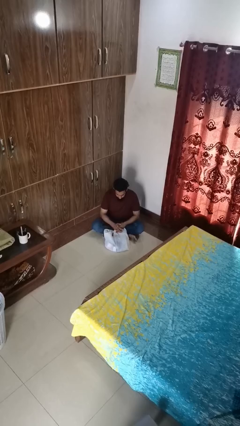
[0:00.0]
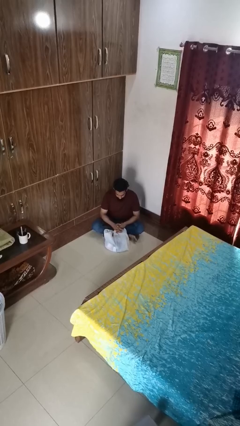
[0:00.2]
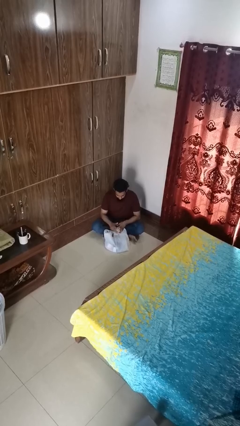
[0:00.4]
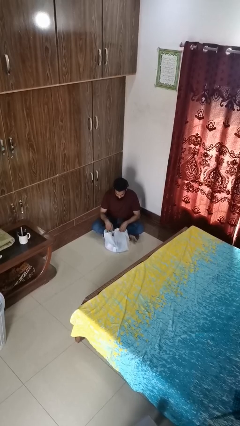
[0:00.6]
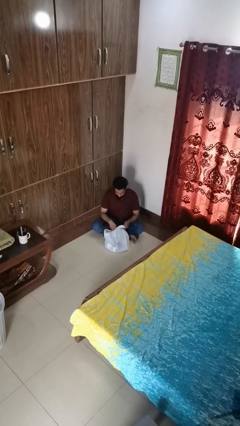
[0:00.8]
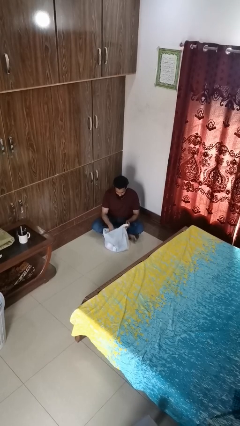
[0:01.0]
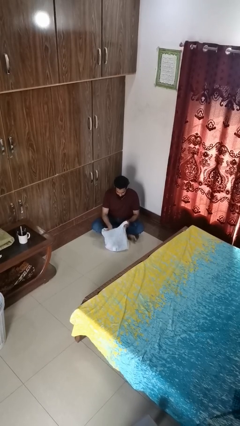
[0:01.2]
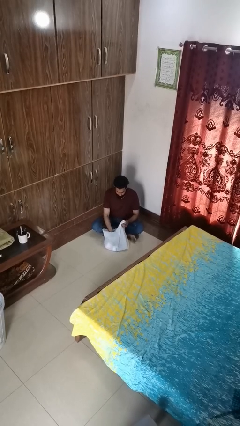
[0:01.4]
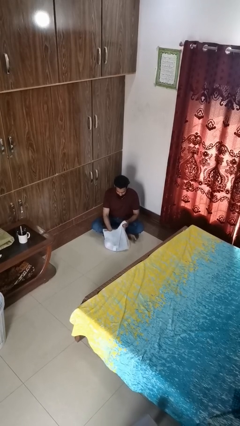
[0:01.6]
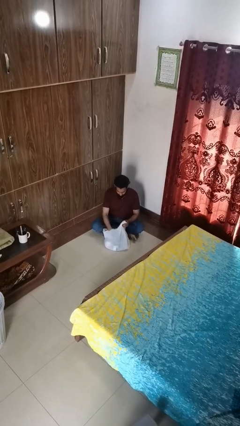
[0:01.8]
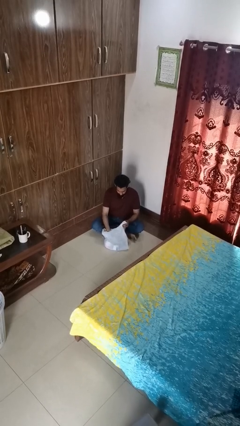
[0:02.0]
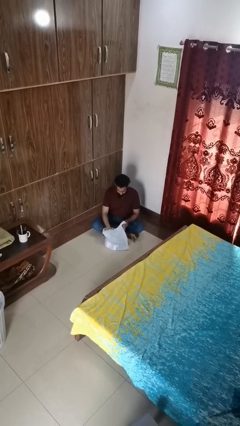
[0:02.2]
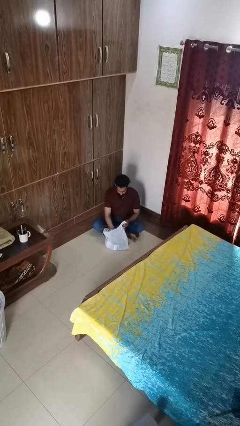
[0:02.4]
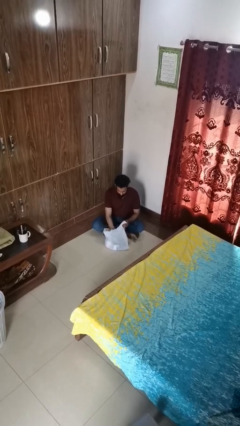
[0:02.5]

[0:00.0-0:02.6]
person searches in bag

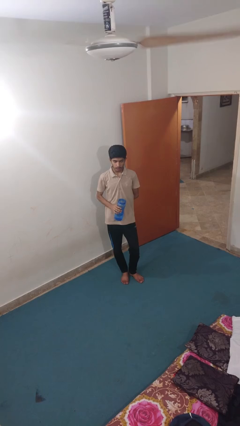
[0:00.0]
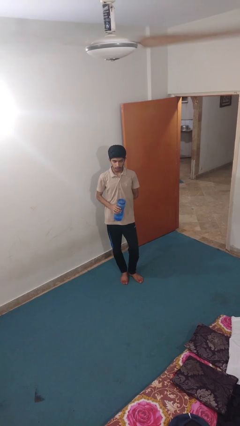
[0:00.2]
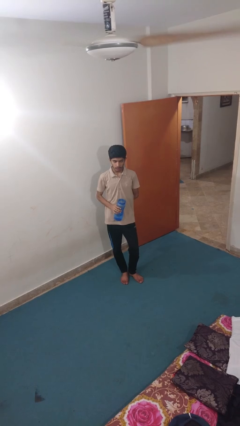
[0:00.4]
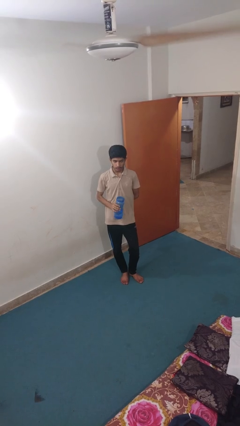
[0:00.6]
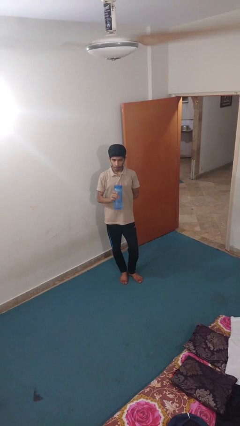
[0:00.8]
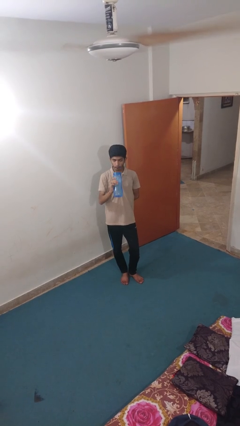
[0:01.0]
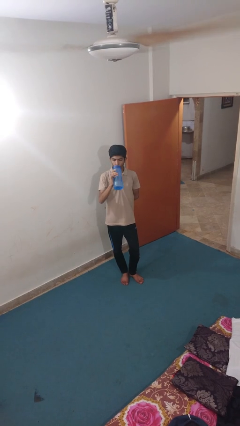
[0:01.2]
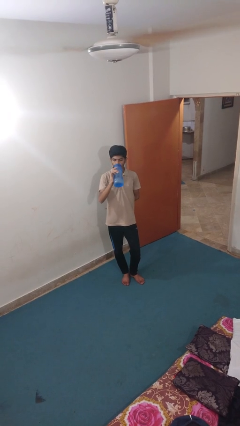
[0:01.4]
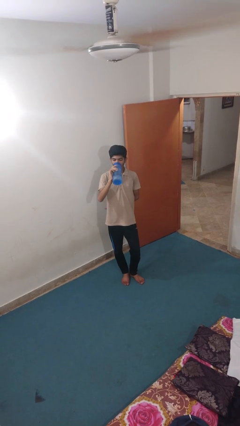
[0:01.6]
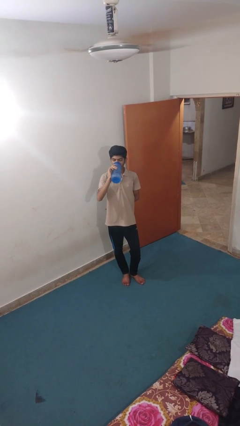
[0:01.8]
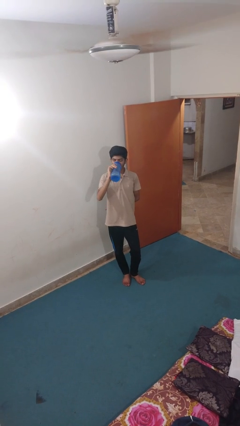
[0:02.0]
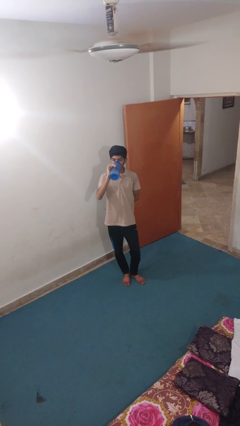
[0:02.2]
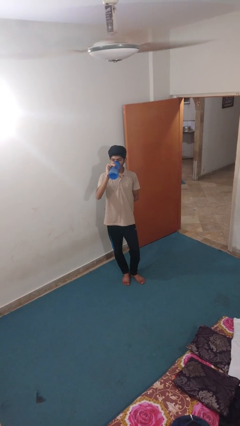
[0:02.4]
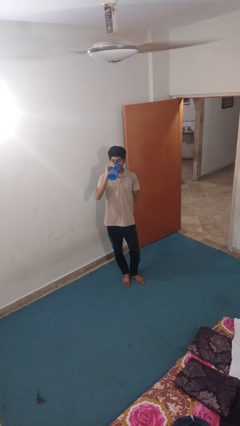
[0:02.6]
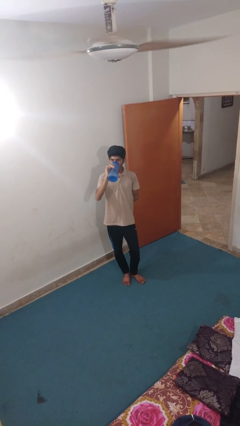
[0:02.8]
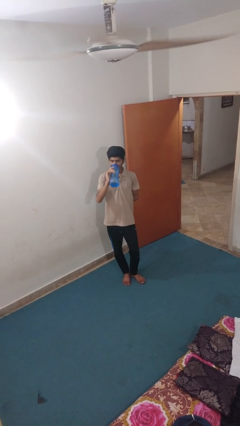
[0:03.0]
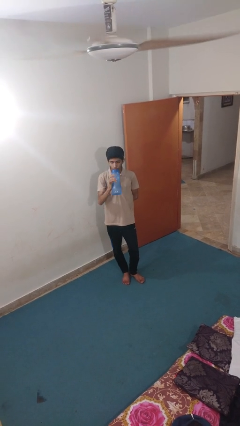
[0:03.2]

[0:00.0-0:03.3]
person drinks from bottle

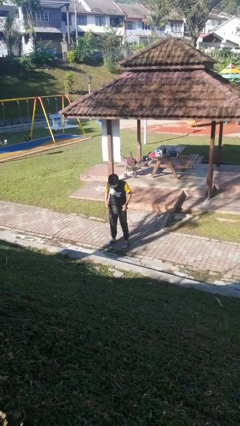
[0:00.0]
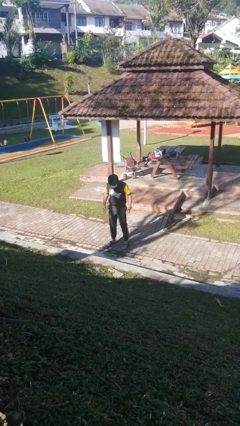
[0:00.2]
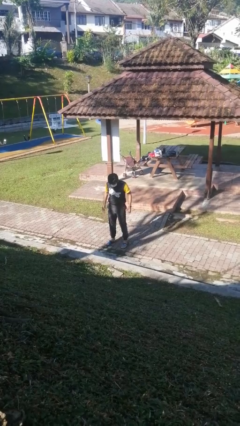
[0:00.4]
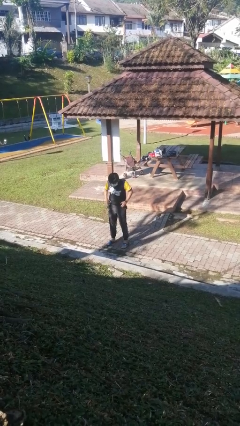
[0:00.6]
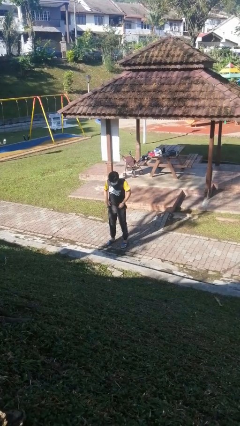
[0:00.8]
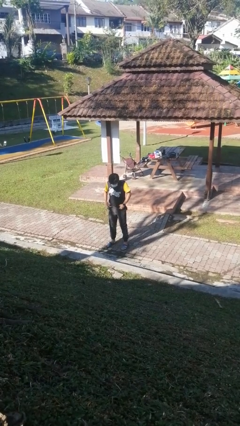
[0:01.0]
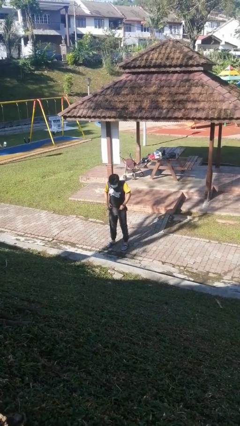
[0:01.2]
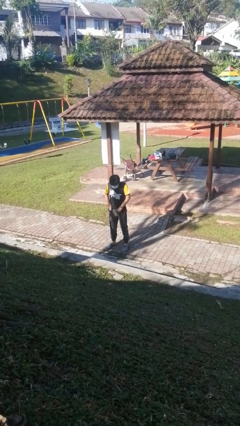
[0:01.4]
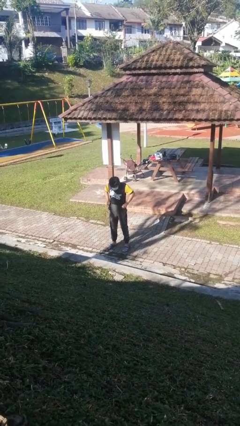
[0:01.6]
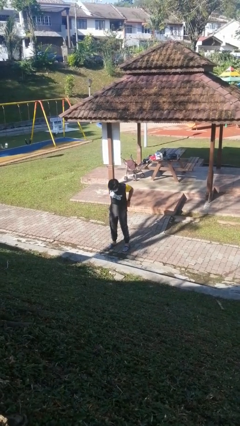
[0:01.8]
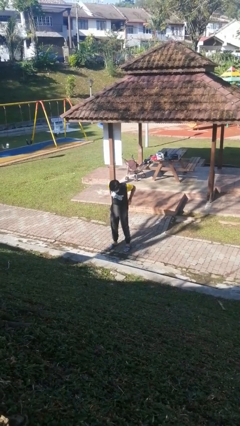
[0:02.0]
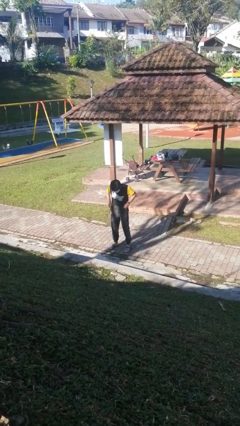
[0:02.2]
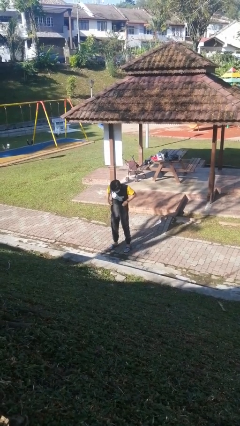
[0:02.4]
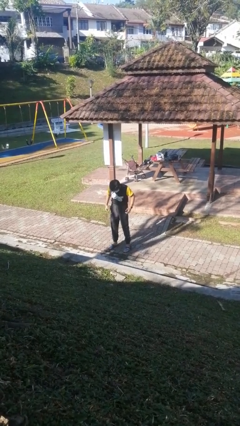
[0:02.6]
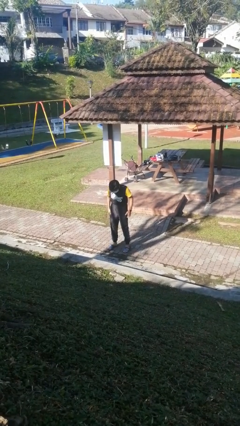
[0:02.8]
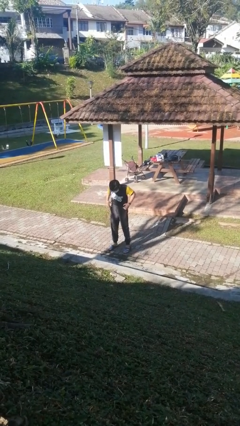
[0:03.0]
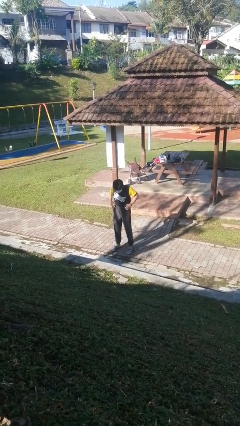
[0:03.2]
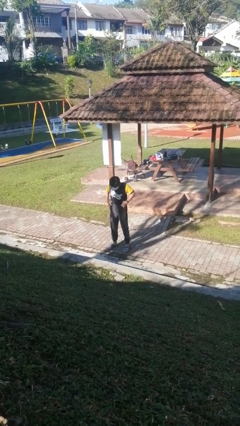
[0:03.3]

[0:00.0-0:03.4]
person hikes up pants

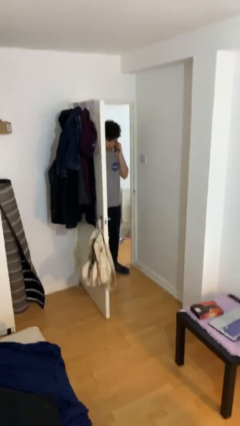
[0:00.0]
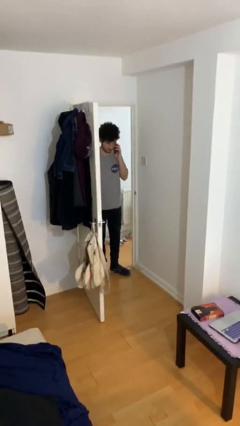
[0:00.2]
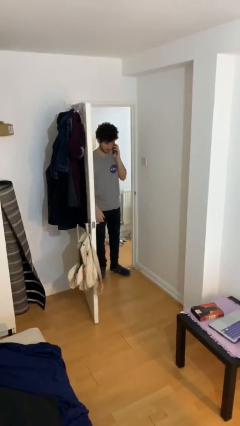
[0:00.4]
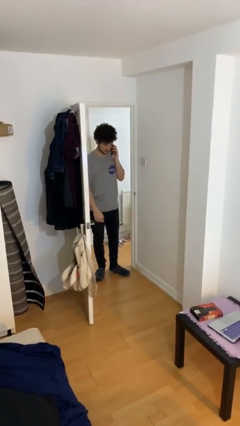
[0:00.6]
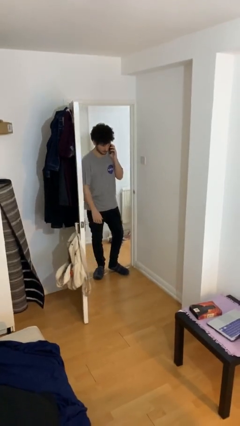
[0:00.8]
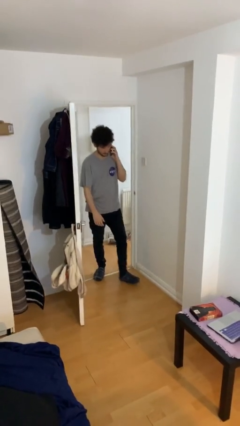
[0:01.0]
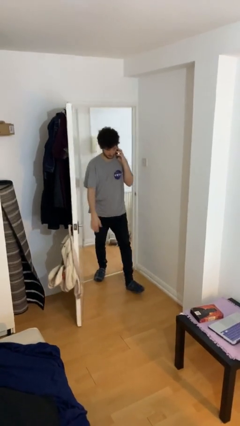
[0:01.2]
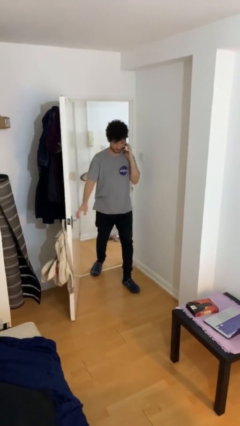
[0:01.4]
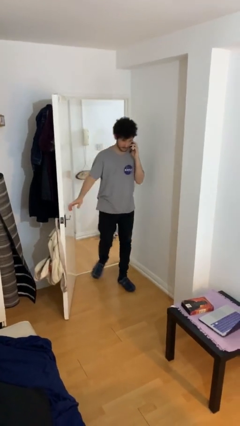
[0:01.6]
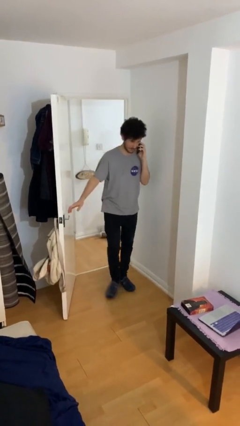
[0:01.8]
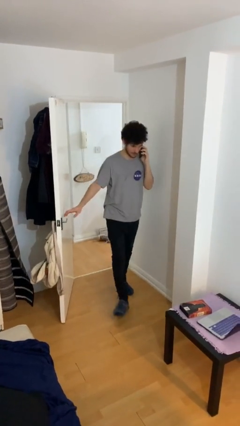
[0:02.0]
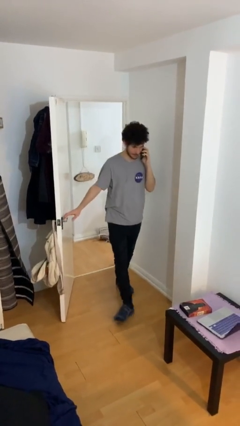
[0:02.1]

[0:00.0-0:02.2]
person enters scene through structure

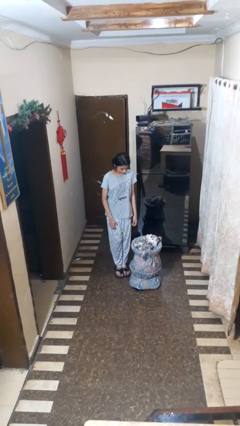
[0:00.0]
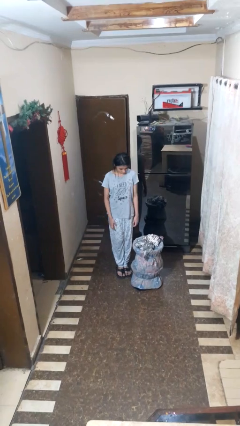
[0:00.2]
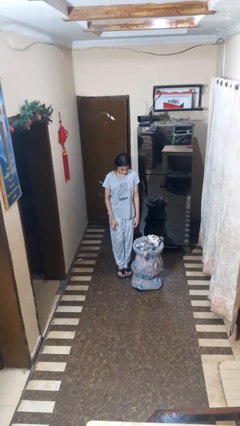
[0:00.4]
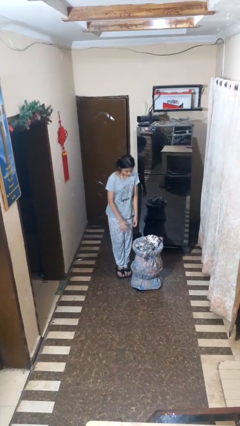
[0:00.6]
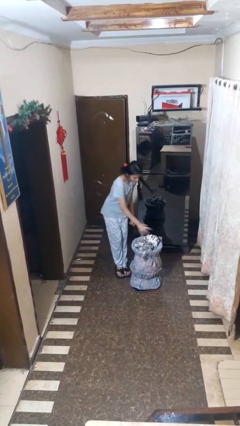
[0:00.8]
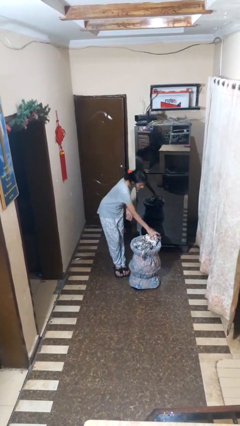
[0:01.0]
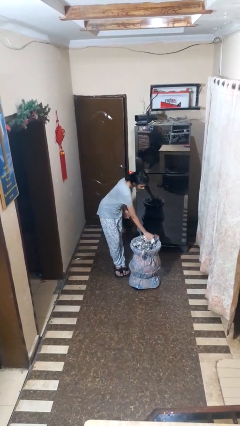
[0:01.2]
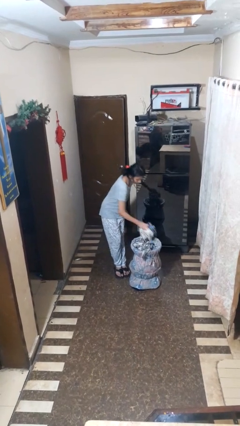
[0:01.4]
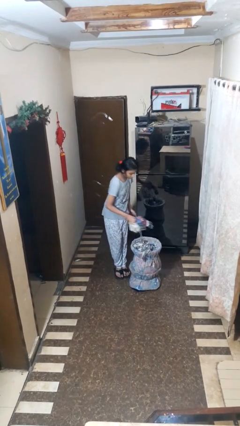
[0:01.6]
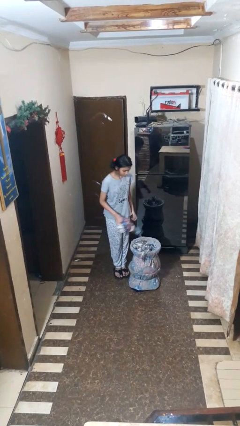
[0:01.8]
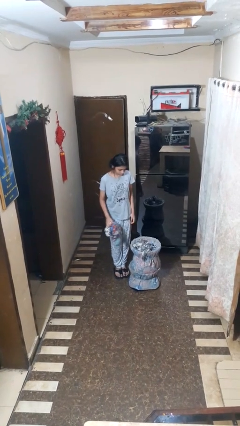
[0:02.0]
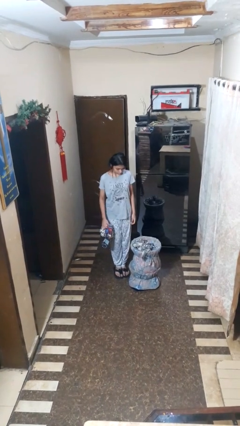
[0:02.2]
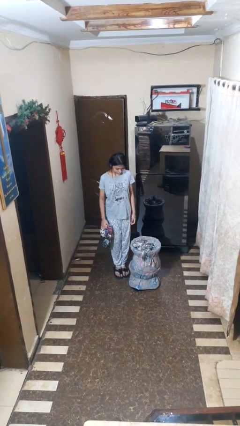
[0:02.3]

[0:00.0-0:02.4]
person puts object into basket

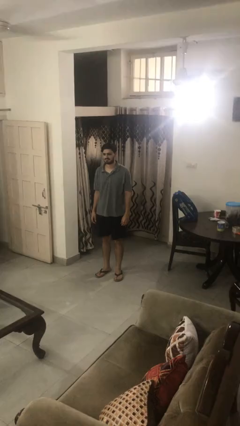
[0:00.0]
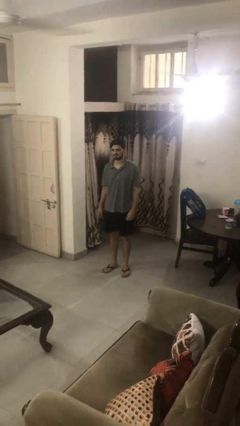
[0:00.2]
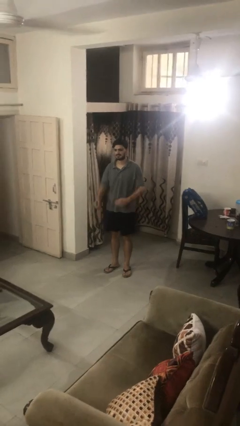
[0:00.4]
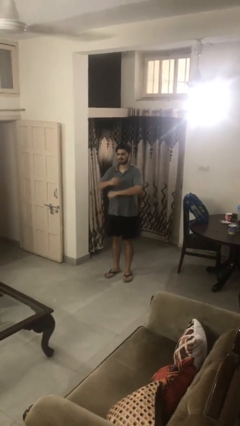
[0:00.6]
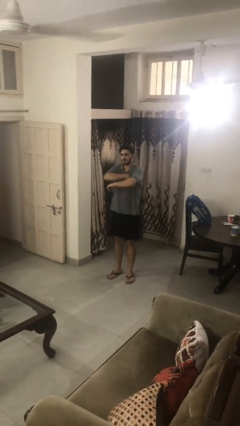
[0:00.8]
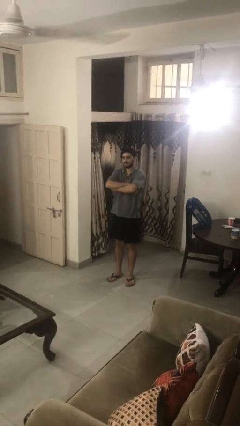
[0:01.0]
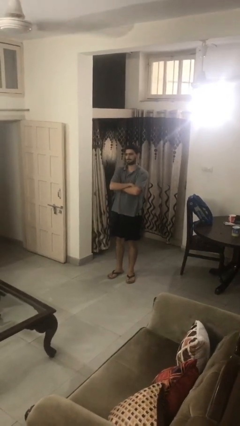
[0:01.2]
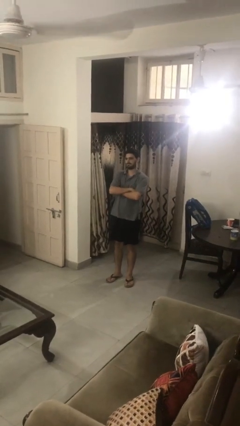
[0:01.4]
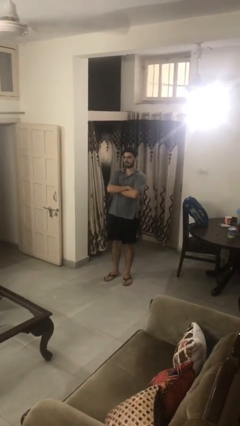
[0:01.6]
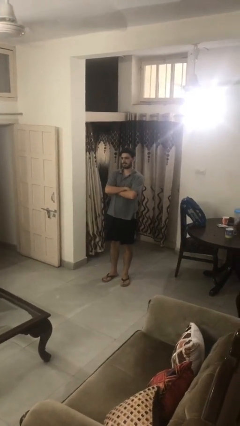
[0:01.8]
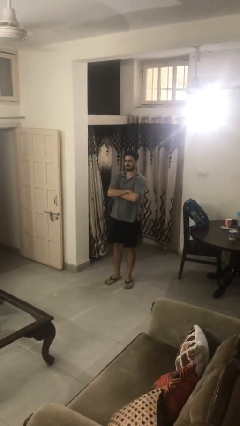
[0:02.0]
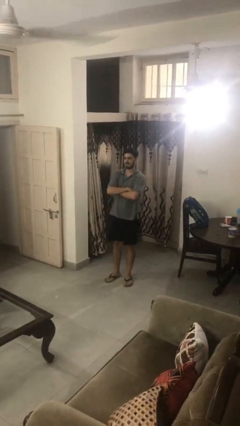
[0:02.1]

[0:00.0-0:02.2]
person crosses arms

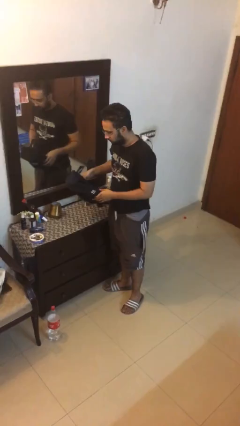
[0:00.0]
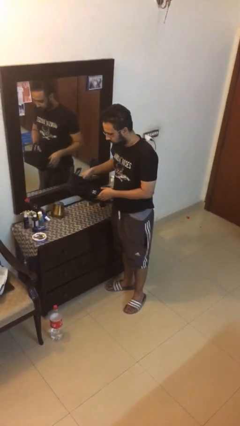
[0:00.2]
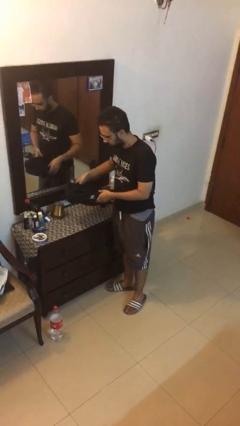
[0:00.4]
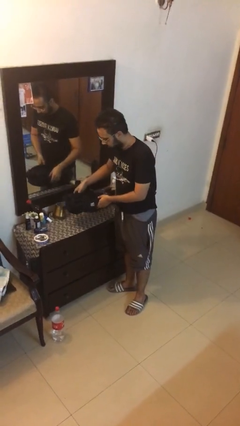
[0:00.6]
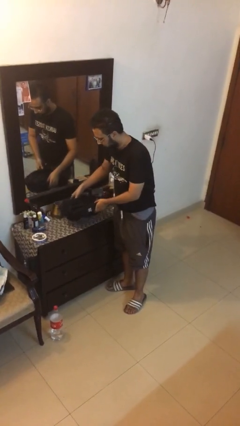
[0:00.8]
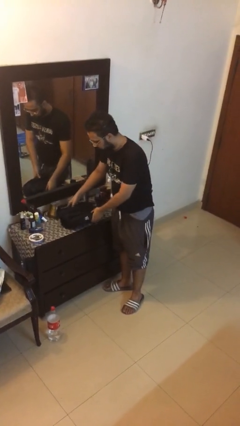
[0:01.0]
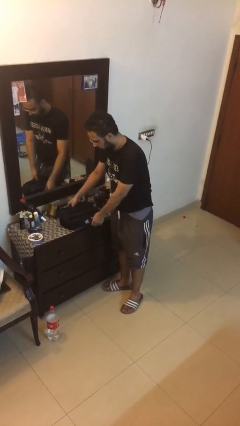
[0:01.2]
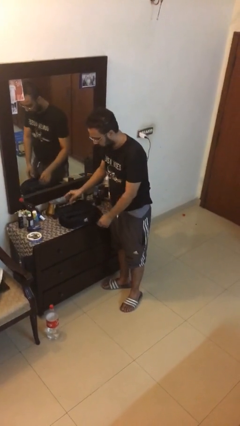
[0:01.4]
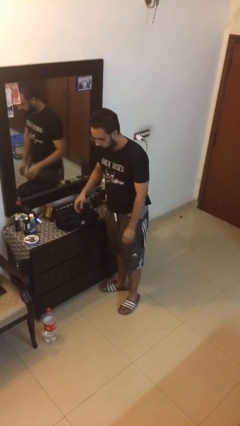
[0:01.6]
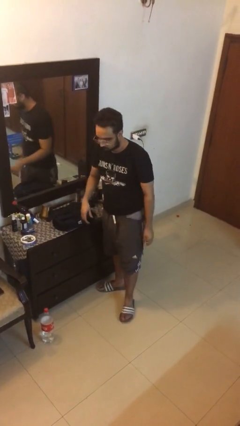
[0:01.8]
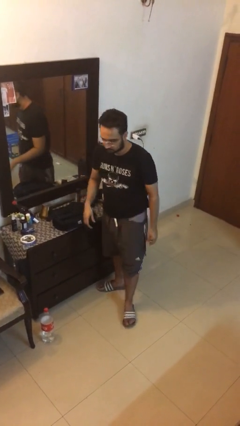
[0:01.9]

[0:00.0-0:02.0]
person puts down object on table
